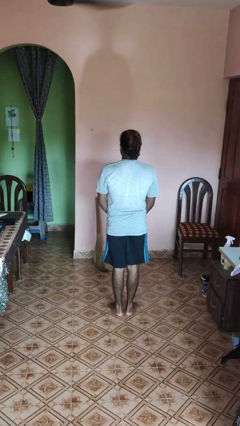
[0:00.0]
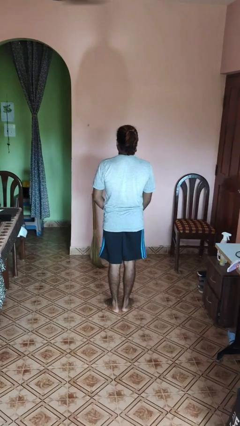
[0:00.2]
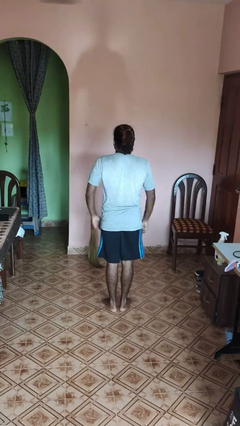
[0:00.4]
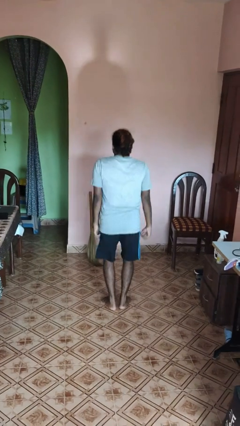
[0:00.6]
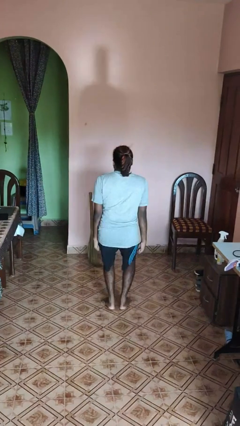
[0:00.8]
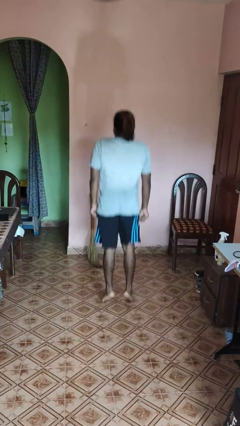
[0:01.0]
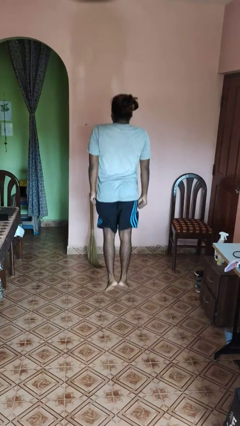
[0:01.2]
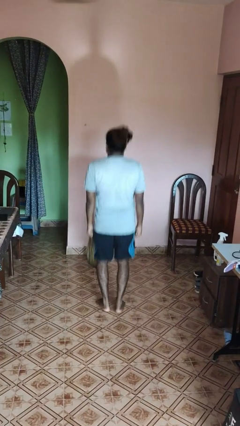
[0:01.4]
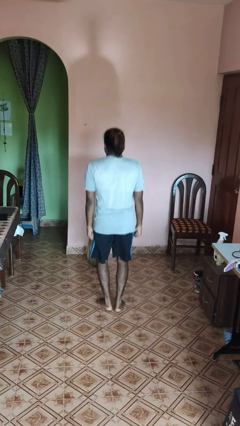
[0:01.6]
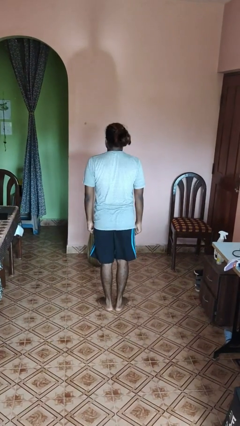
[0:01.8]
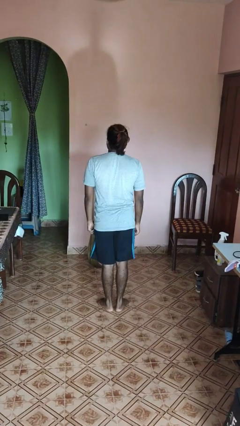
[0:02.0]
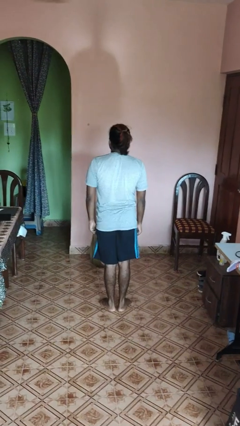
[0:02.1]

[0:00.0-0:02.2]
person jumps

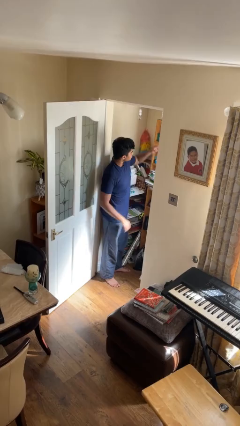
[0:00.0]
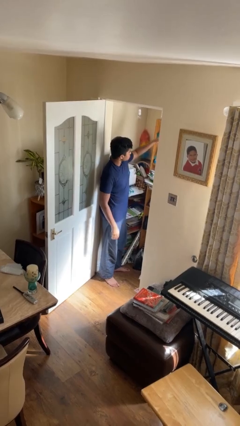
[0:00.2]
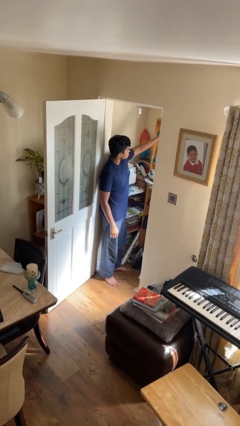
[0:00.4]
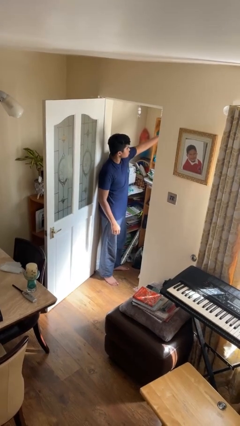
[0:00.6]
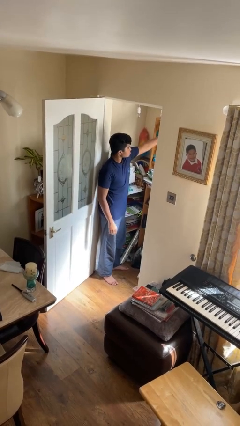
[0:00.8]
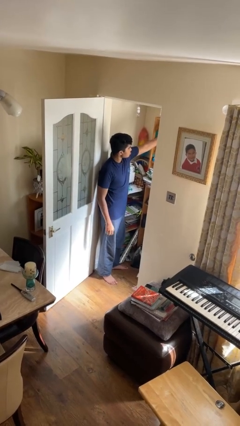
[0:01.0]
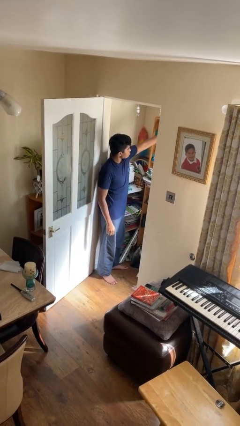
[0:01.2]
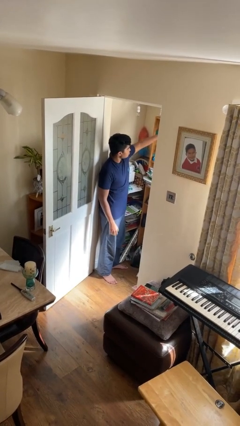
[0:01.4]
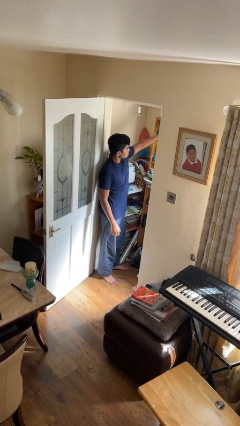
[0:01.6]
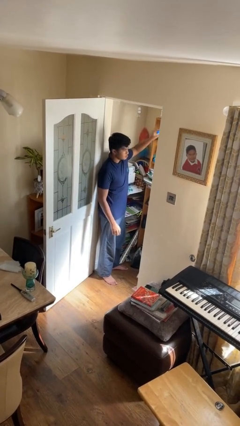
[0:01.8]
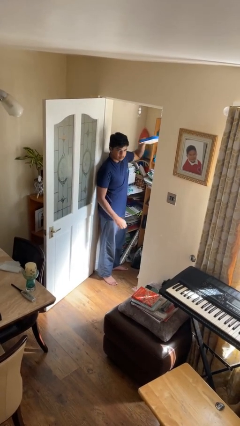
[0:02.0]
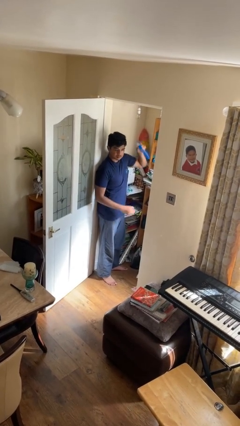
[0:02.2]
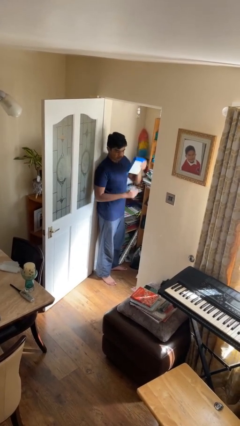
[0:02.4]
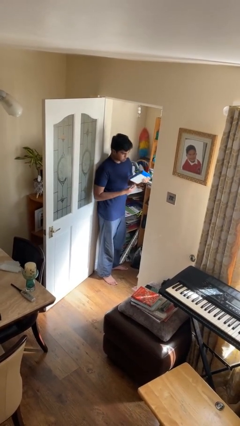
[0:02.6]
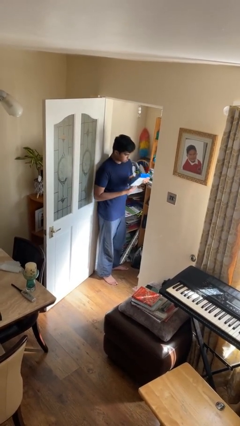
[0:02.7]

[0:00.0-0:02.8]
person picks up object from shelf

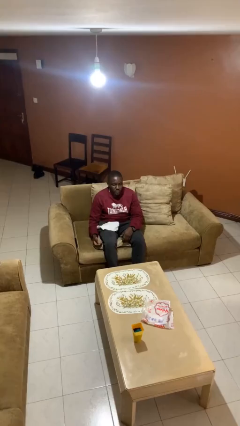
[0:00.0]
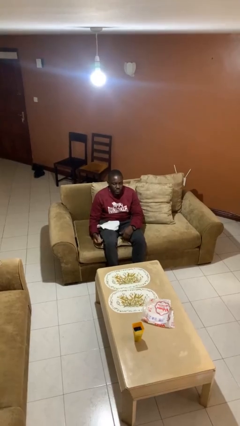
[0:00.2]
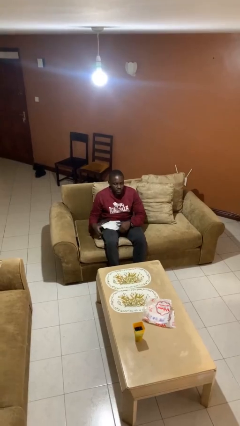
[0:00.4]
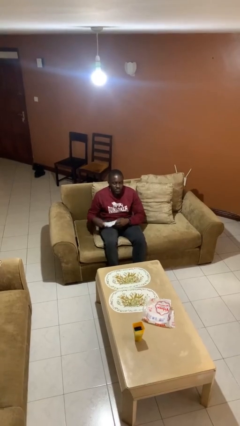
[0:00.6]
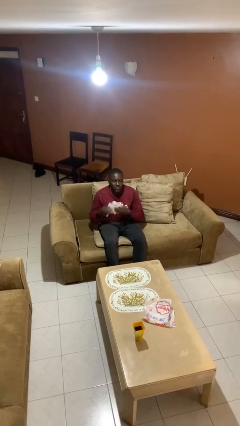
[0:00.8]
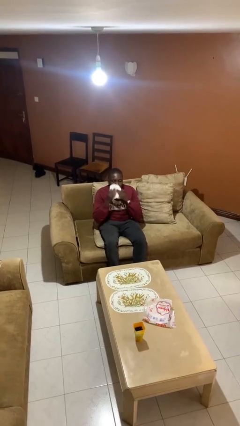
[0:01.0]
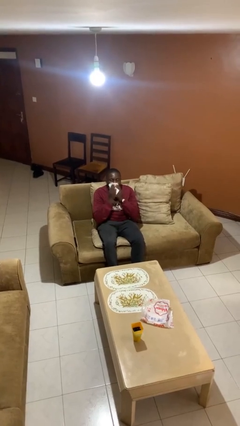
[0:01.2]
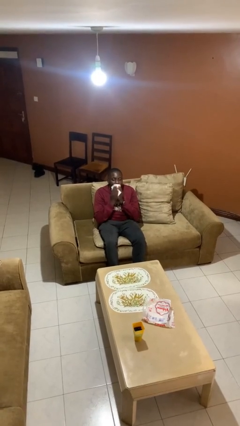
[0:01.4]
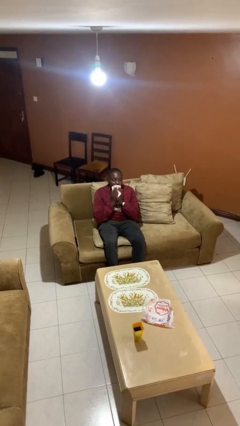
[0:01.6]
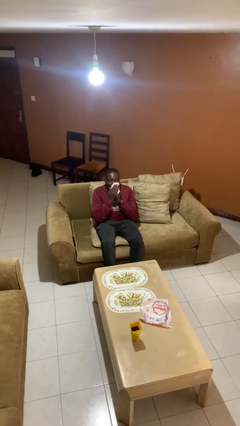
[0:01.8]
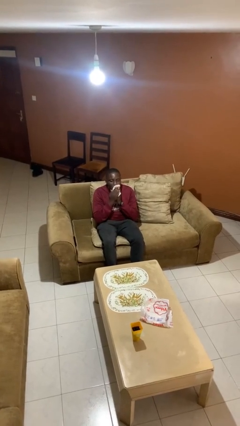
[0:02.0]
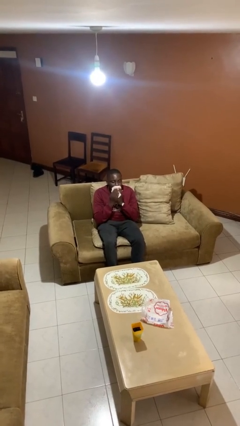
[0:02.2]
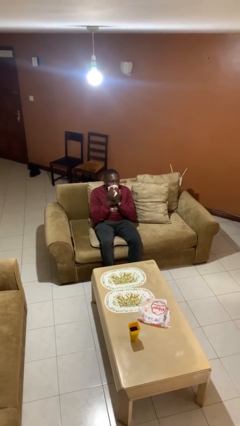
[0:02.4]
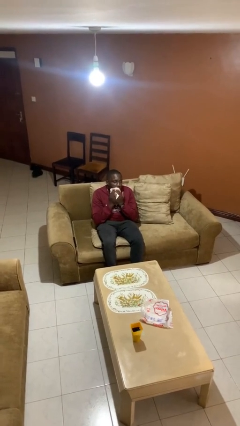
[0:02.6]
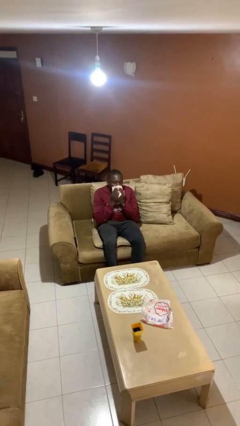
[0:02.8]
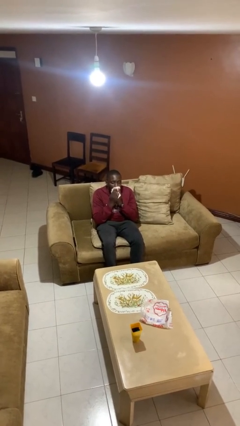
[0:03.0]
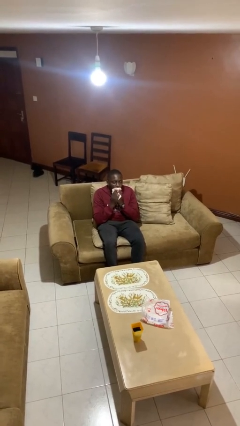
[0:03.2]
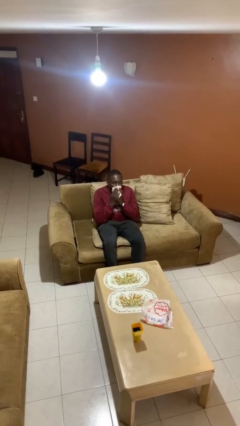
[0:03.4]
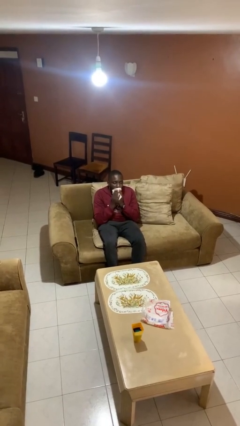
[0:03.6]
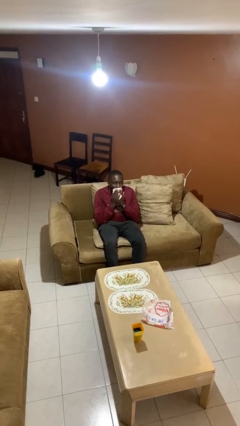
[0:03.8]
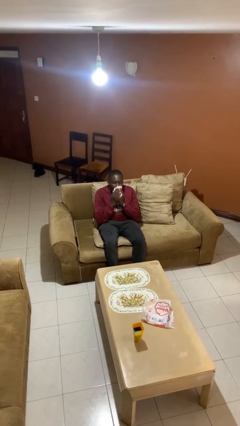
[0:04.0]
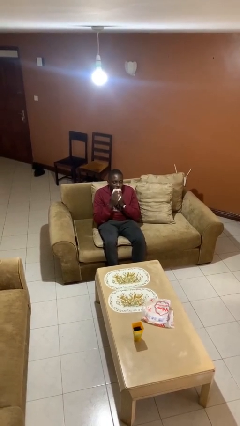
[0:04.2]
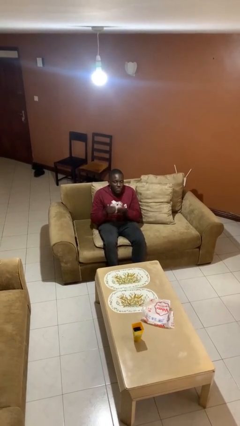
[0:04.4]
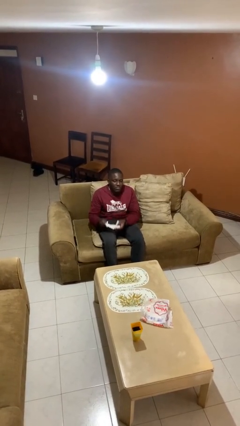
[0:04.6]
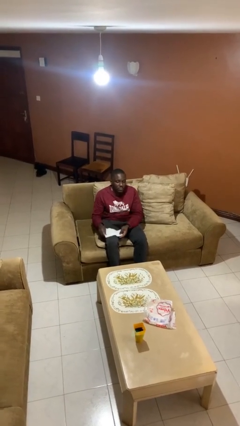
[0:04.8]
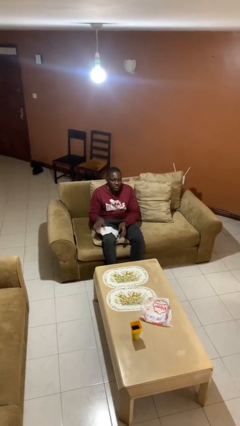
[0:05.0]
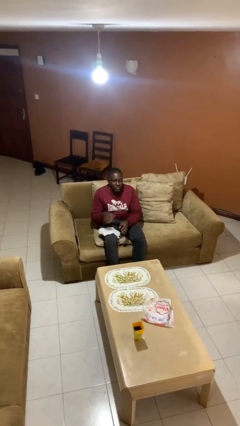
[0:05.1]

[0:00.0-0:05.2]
person wipes mouth with napkin

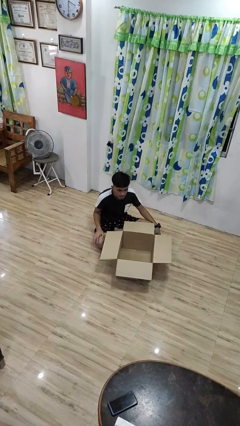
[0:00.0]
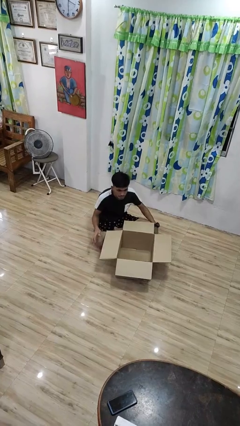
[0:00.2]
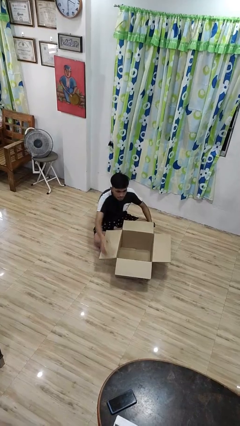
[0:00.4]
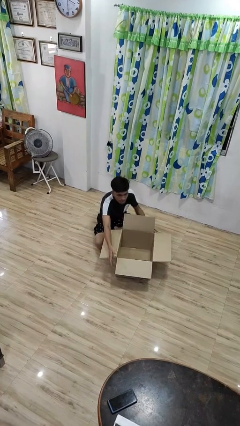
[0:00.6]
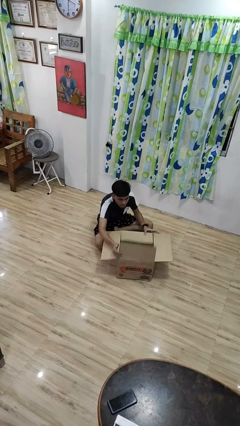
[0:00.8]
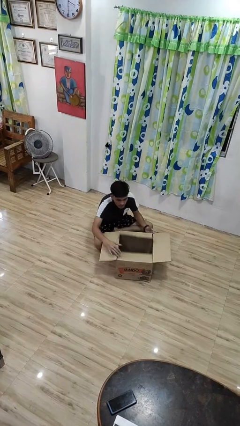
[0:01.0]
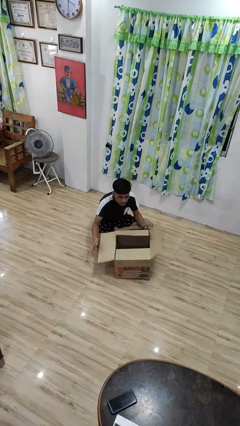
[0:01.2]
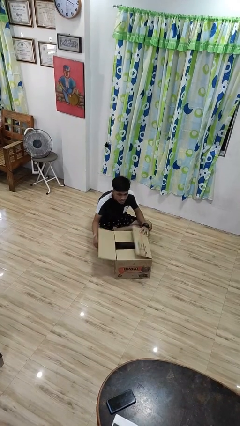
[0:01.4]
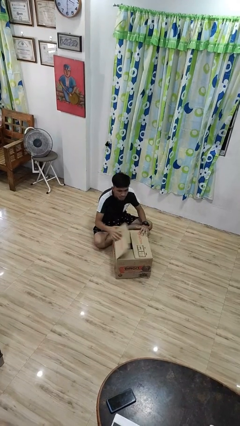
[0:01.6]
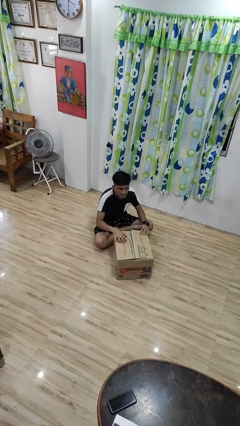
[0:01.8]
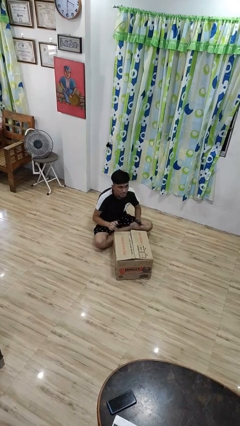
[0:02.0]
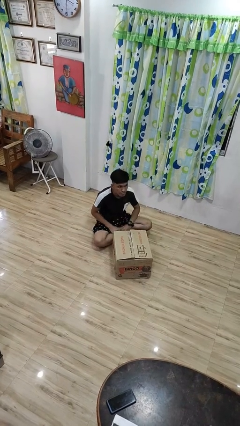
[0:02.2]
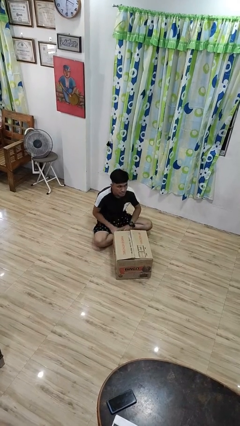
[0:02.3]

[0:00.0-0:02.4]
person closes box

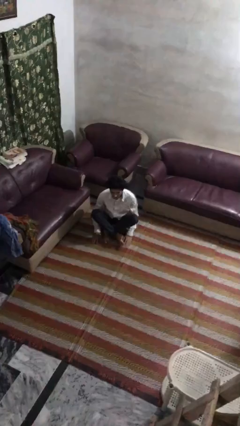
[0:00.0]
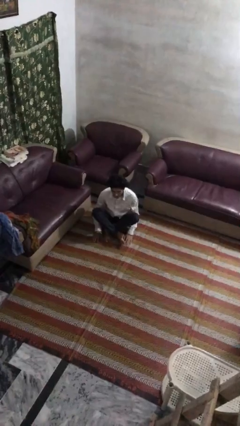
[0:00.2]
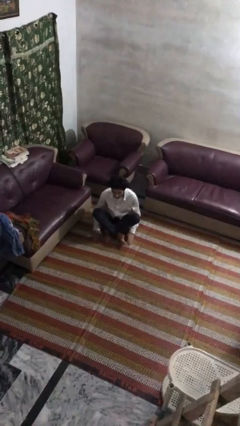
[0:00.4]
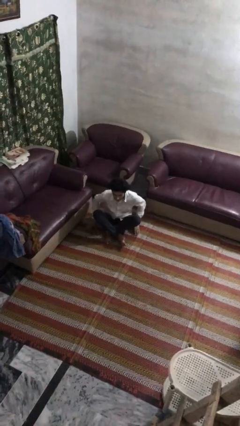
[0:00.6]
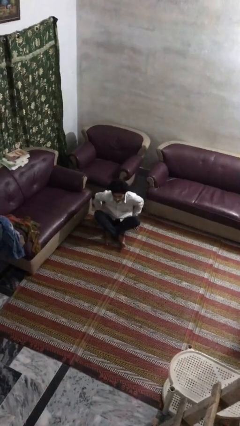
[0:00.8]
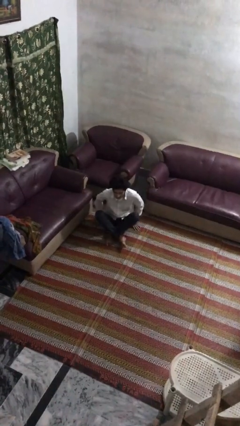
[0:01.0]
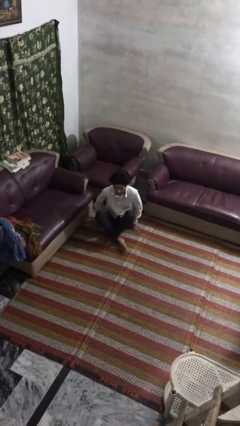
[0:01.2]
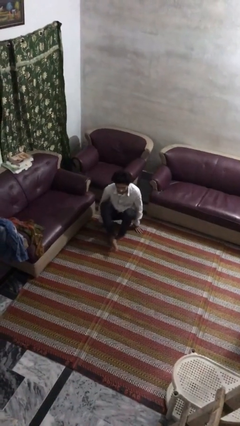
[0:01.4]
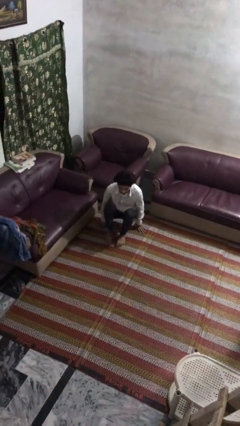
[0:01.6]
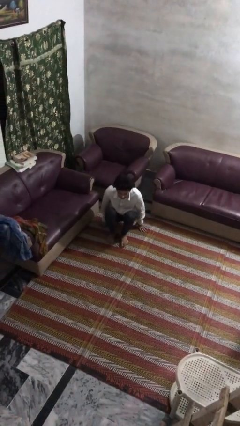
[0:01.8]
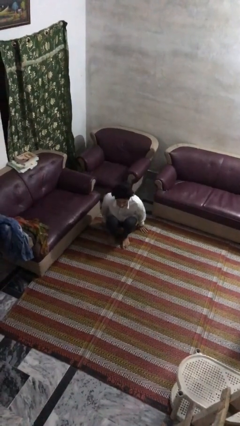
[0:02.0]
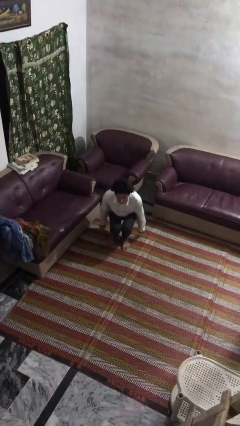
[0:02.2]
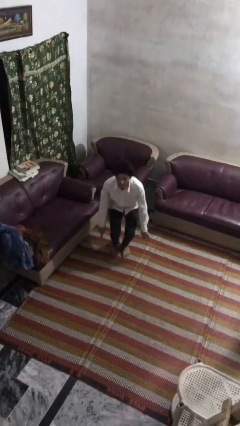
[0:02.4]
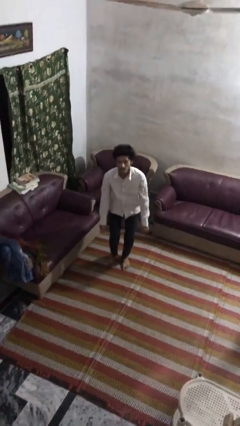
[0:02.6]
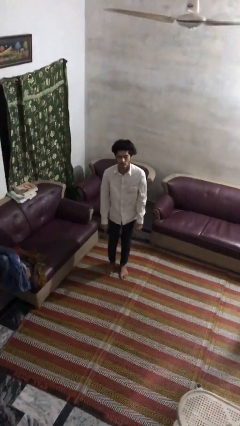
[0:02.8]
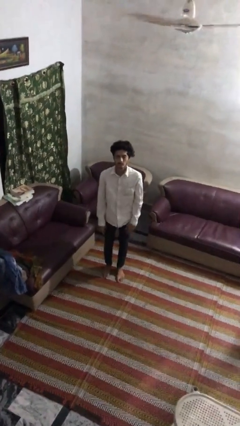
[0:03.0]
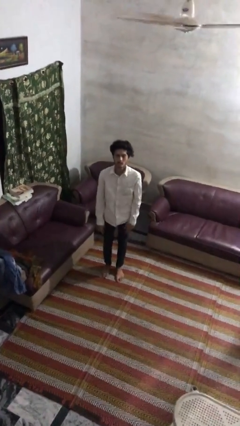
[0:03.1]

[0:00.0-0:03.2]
person stands up from floor

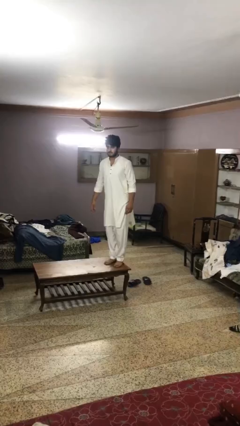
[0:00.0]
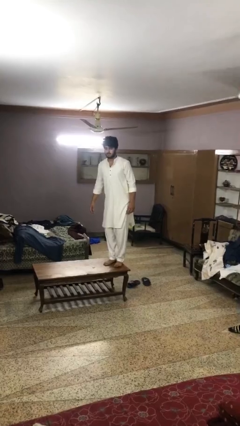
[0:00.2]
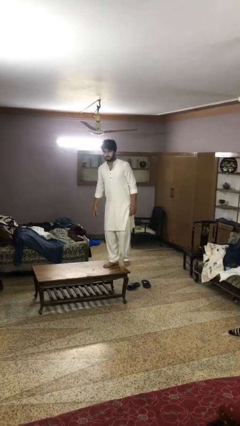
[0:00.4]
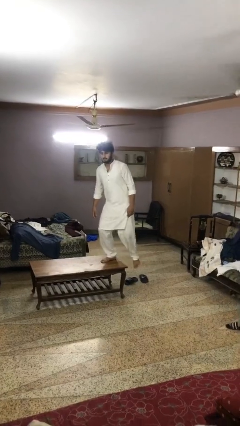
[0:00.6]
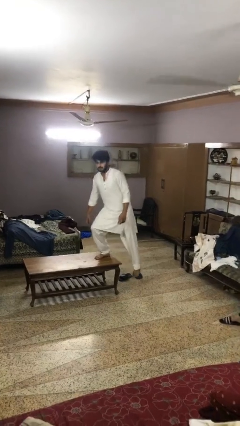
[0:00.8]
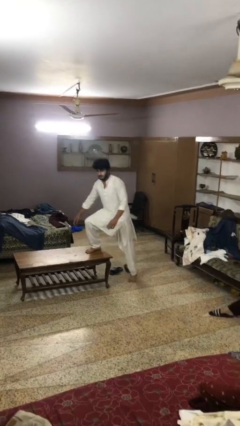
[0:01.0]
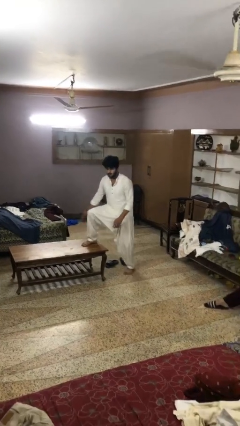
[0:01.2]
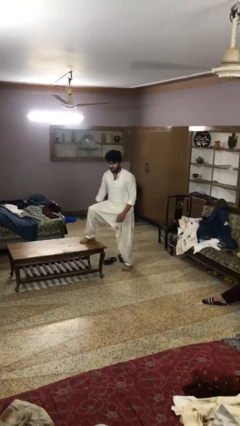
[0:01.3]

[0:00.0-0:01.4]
person climbs off table

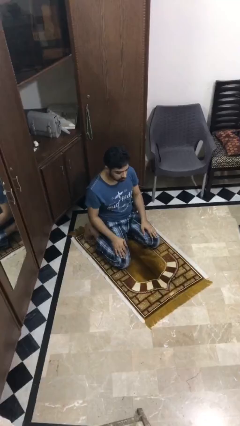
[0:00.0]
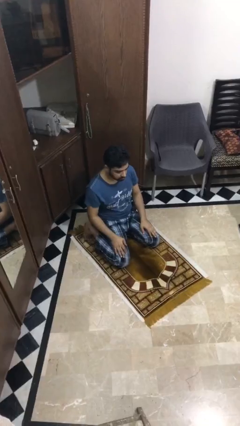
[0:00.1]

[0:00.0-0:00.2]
person prays
